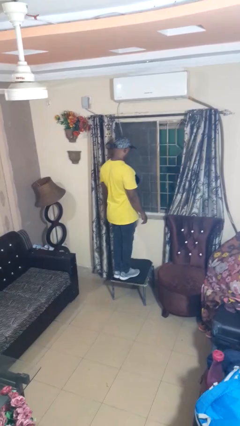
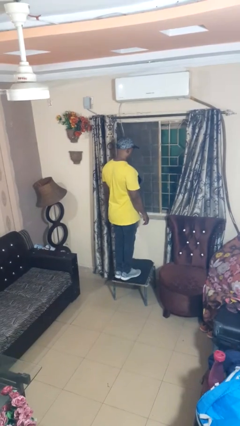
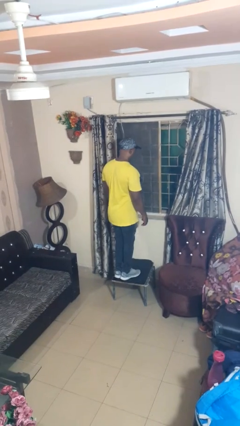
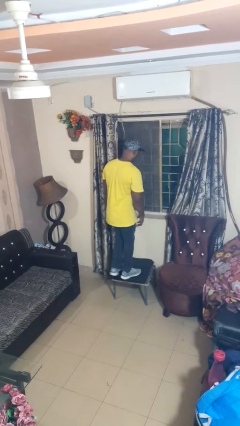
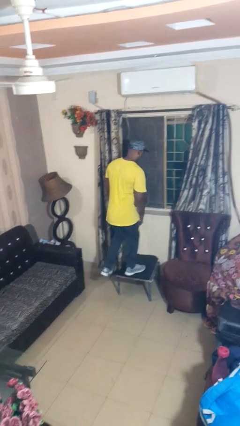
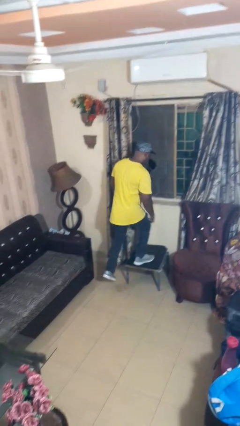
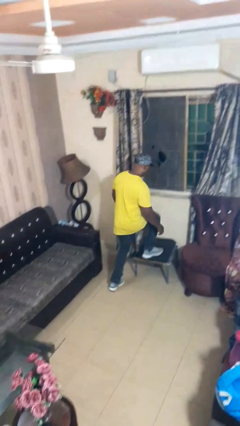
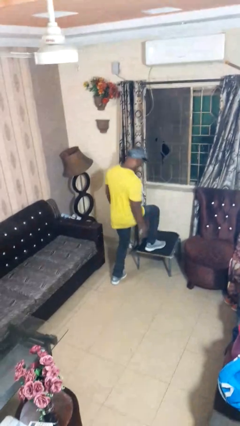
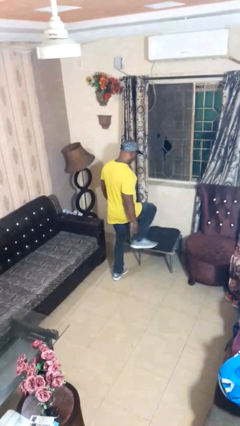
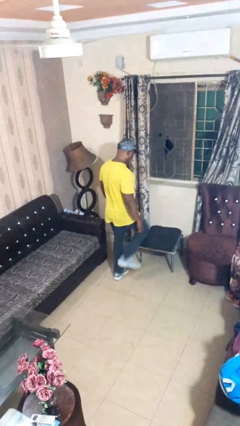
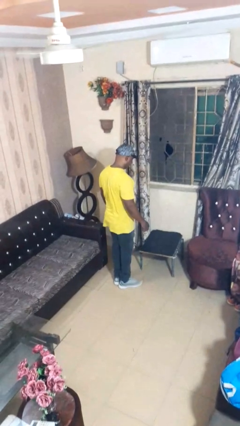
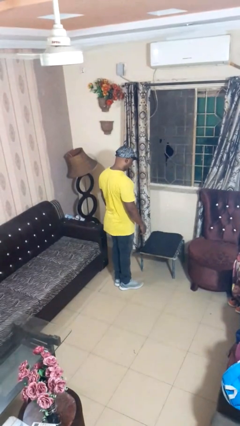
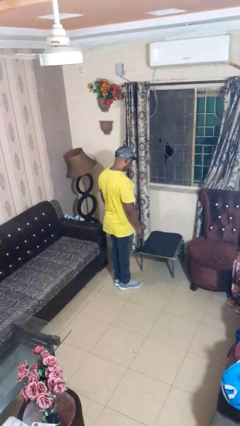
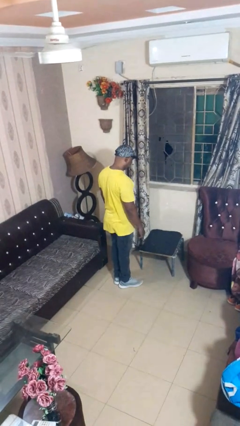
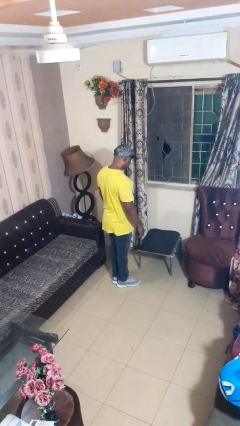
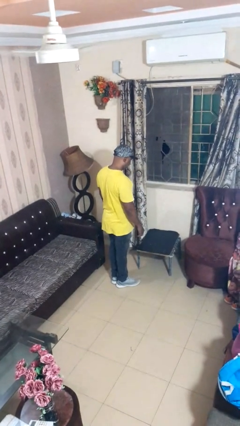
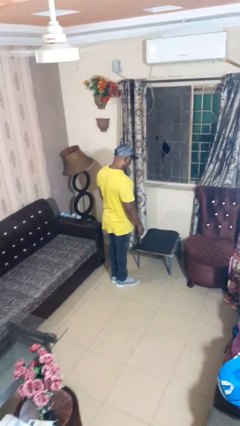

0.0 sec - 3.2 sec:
person climbs off table

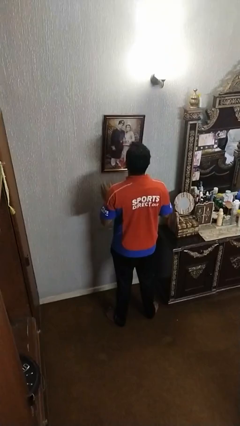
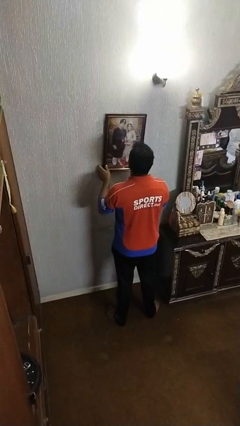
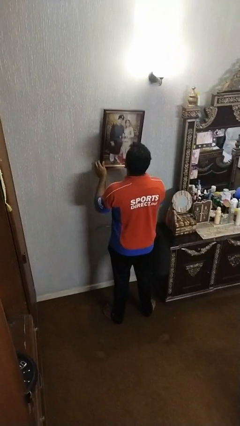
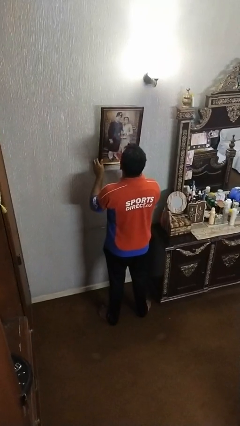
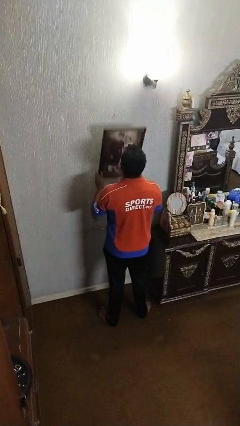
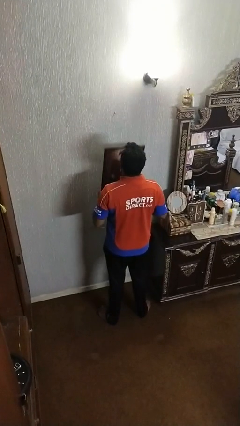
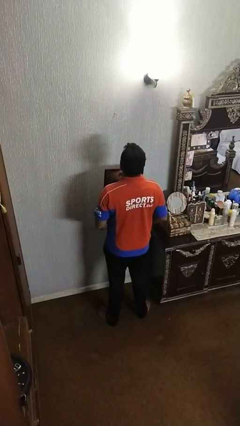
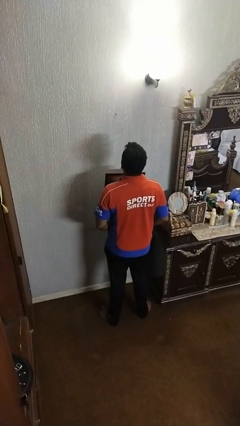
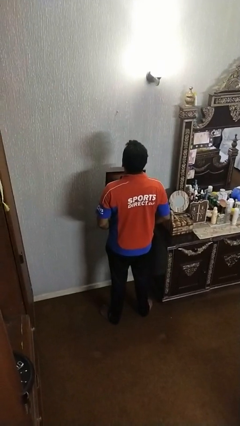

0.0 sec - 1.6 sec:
person takes down picture frame

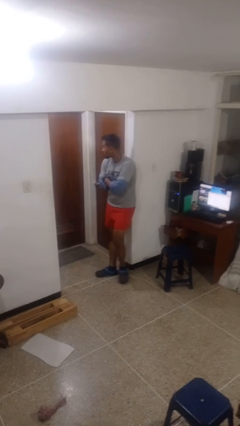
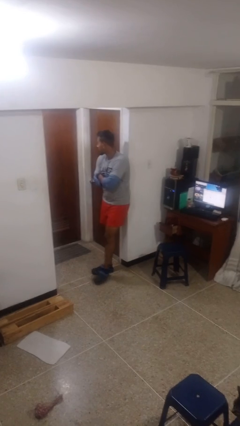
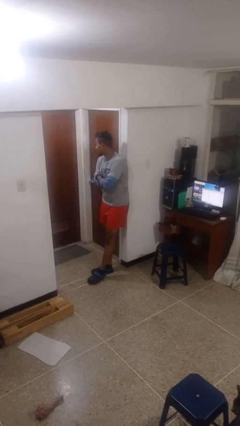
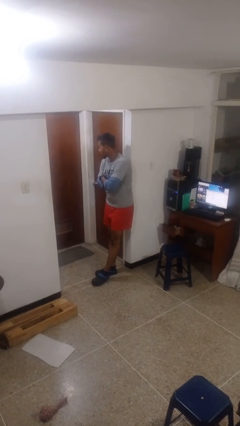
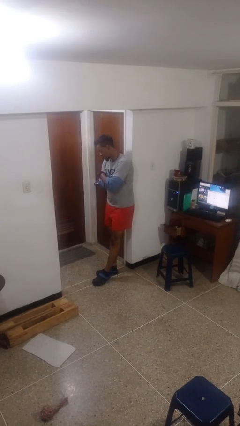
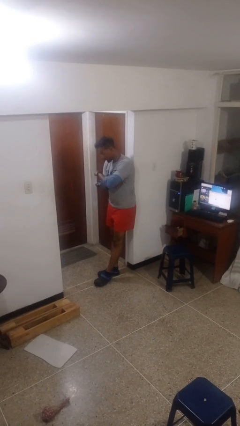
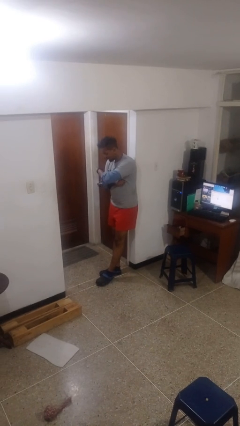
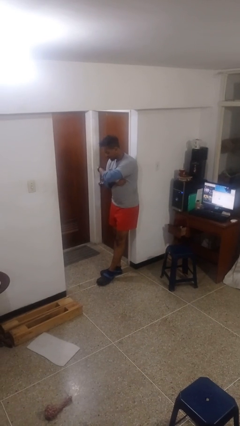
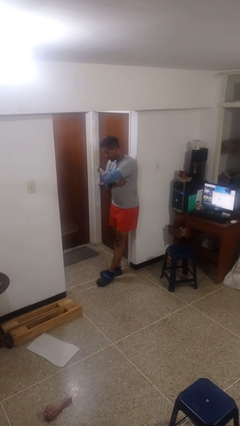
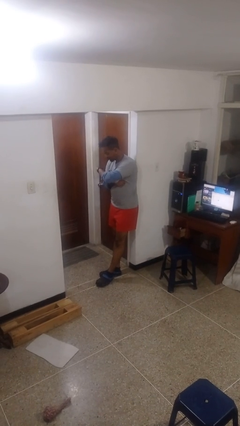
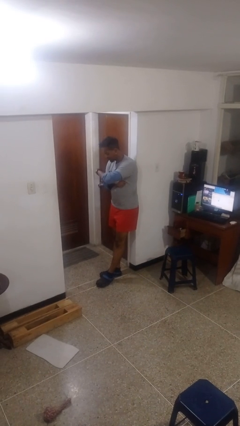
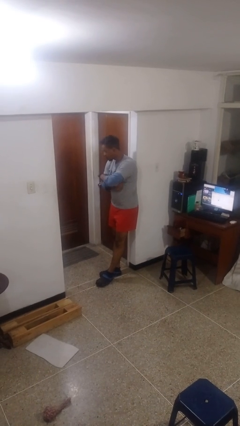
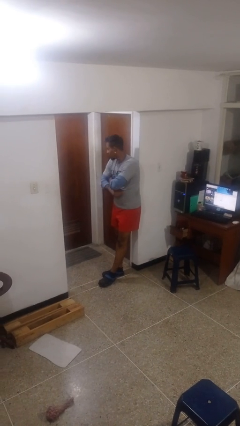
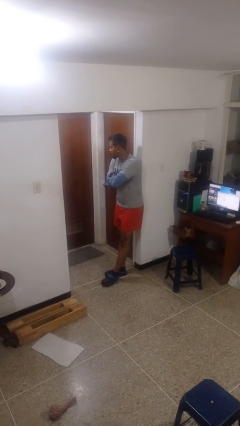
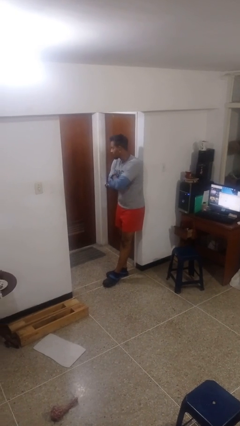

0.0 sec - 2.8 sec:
person looks at wristwatch

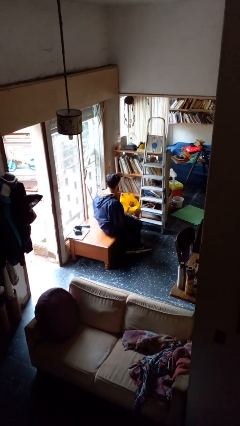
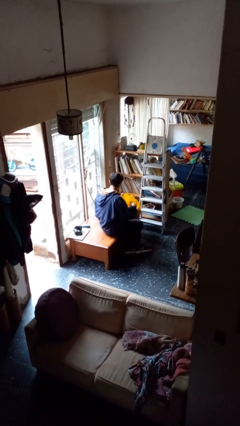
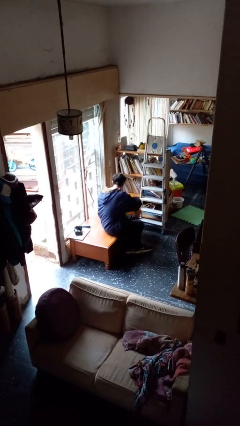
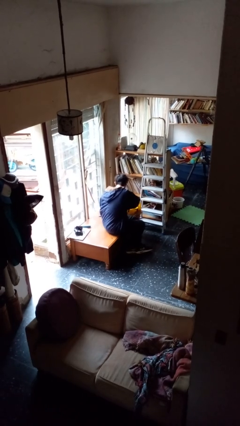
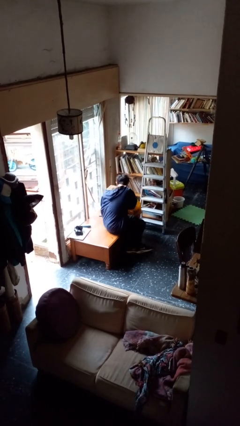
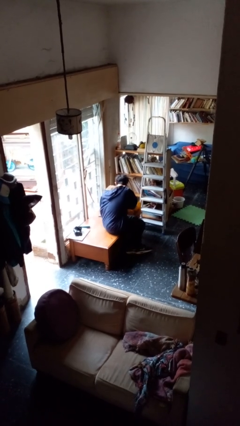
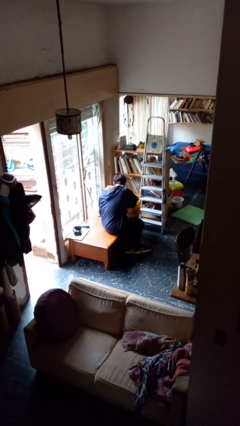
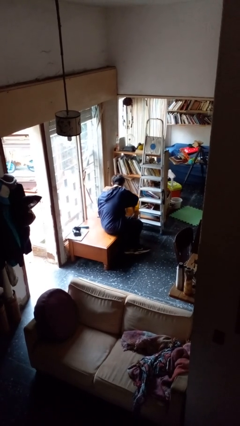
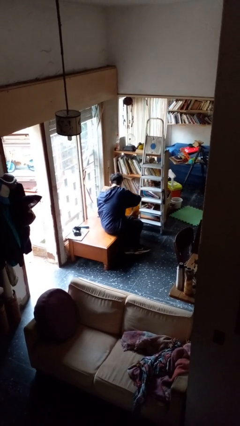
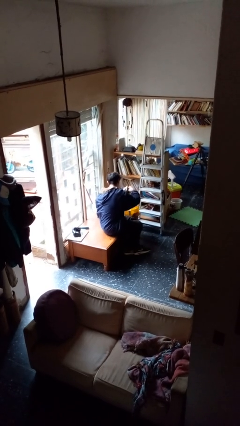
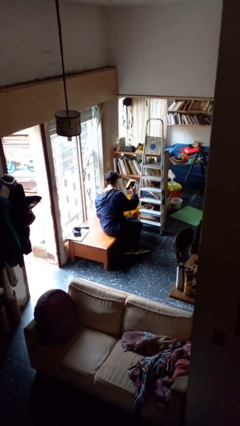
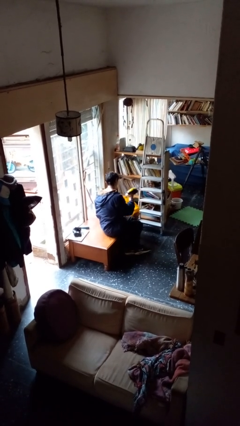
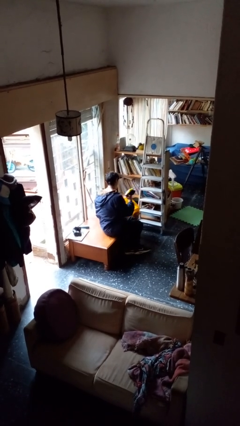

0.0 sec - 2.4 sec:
person takes object from bag

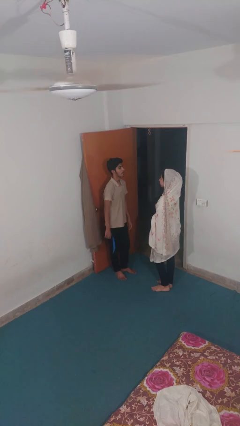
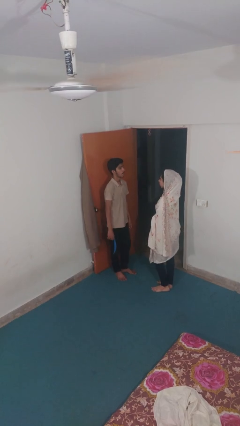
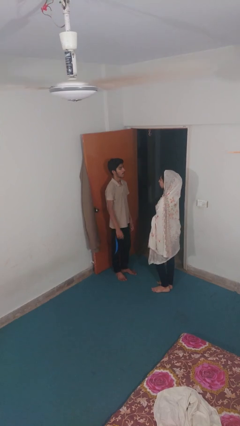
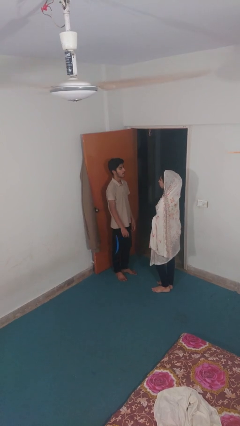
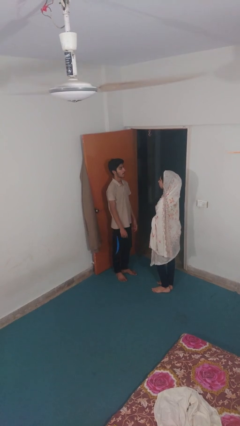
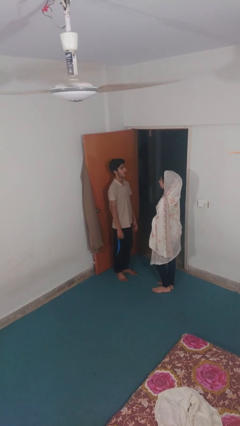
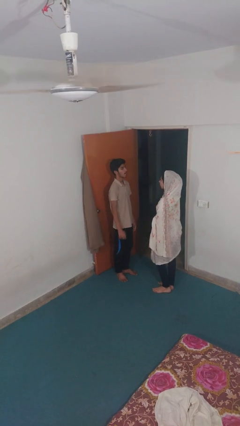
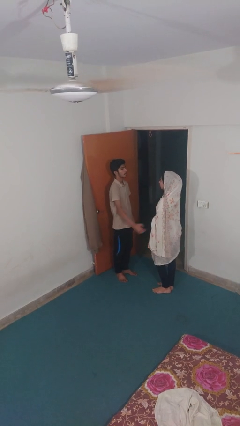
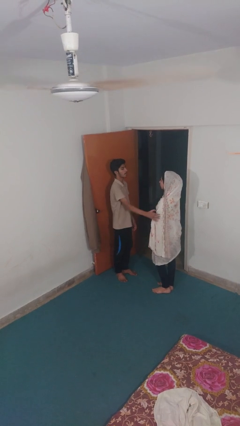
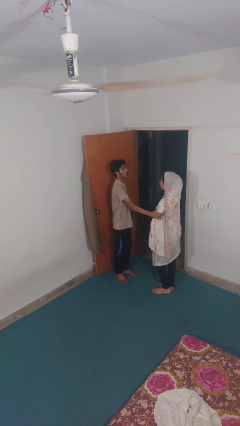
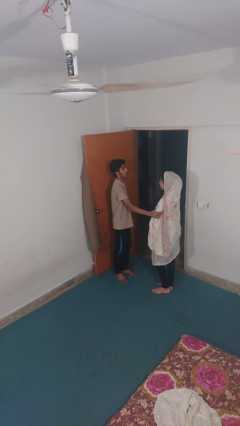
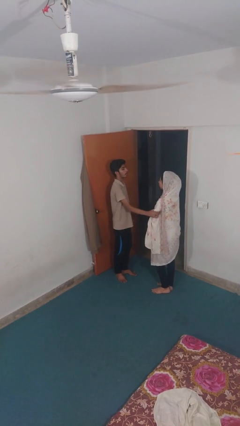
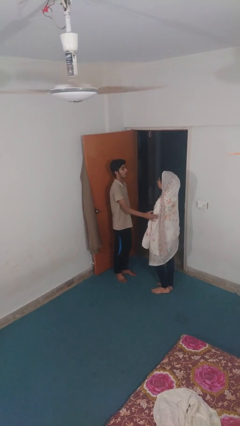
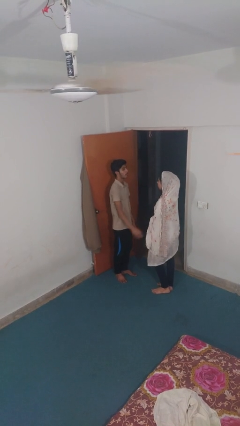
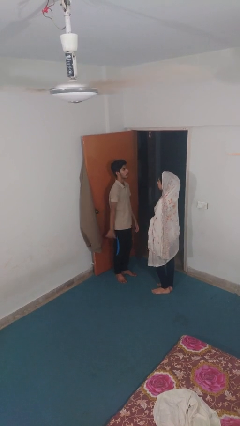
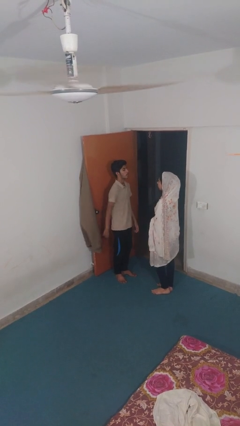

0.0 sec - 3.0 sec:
person grabs person by bicep

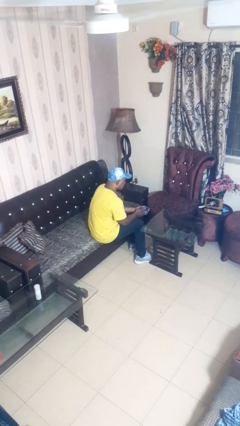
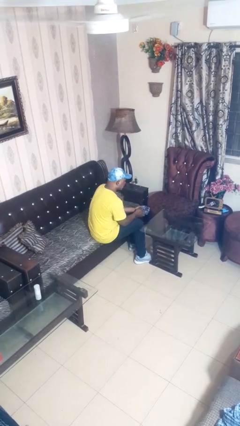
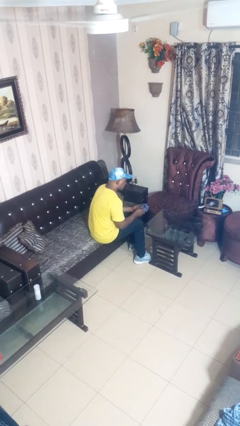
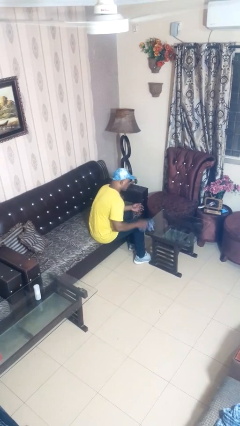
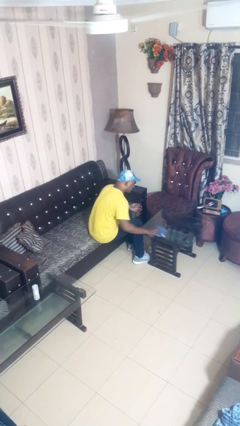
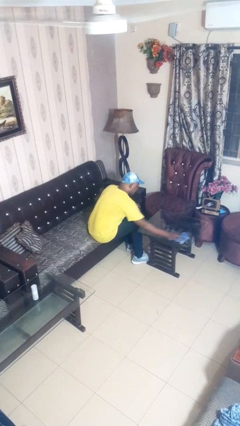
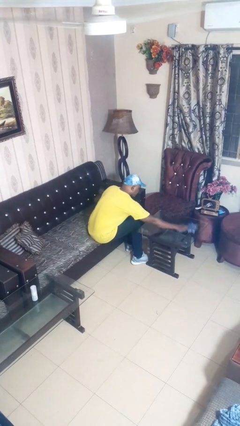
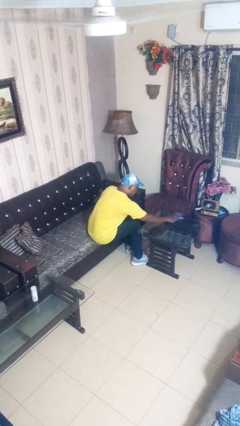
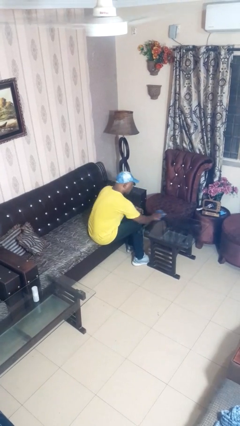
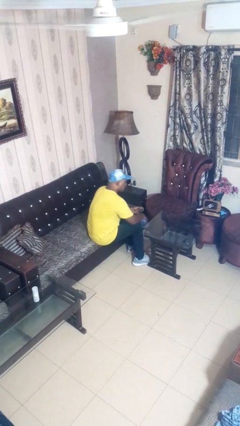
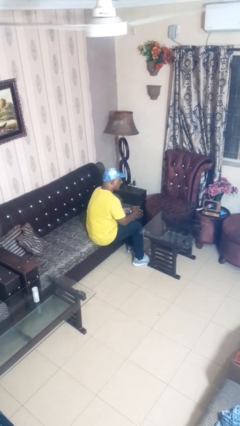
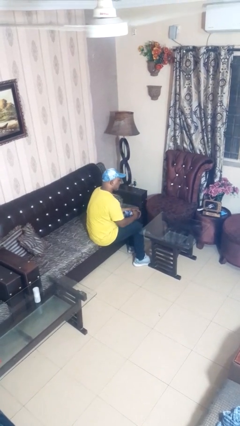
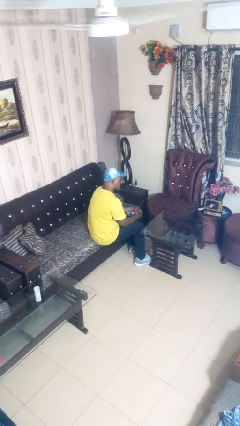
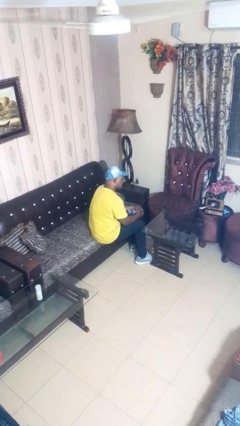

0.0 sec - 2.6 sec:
person cleans table with rag

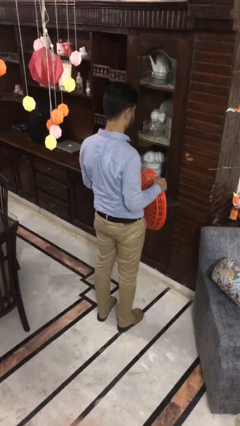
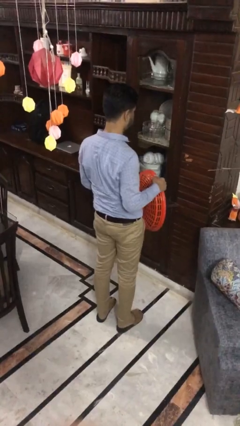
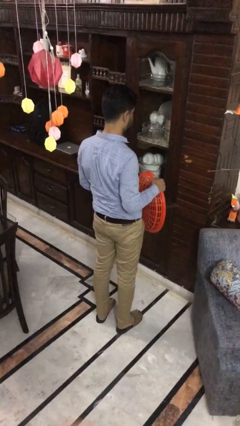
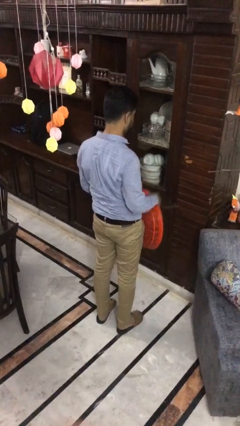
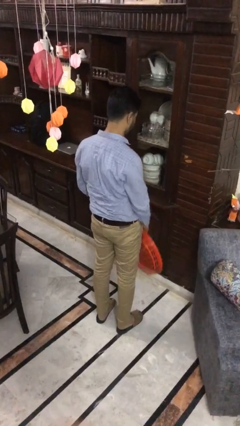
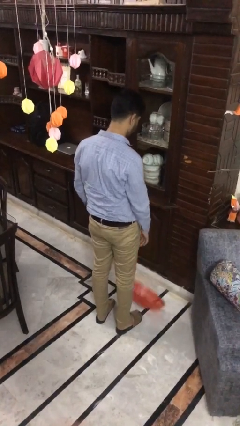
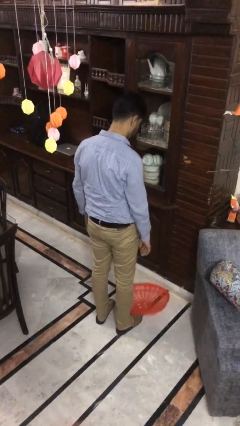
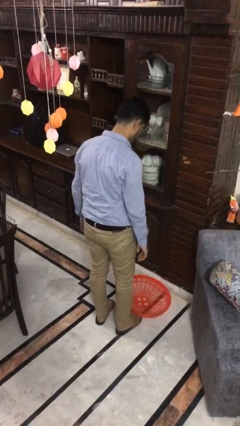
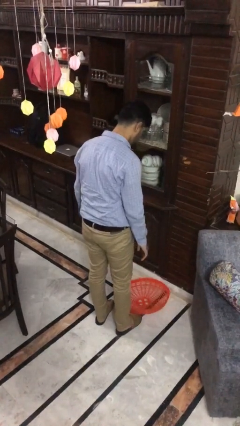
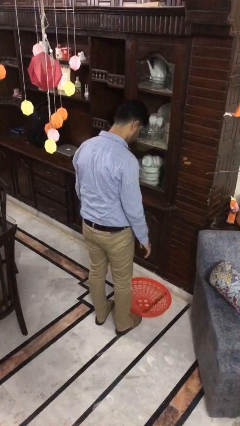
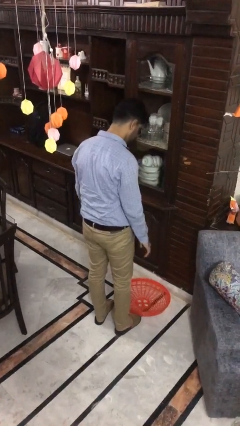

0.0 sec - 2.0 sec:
person drops object
